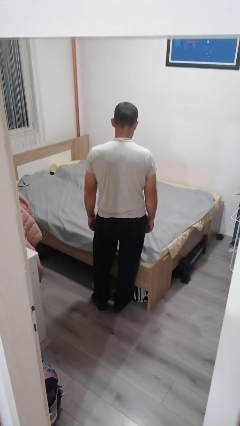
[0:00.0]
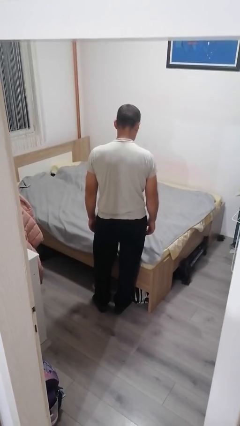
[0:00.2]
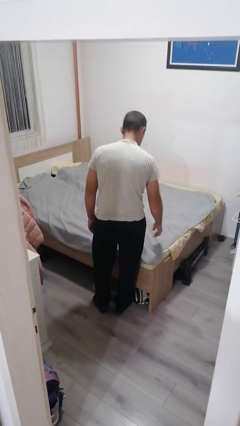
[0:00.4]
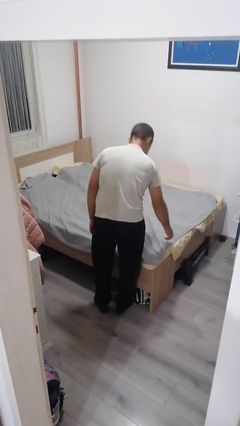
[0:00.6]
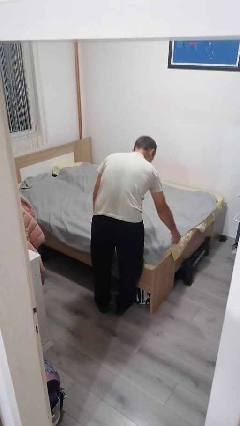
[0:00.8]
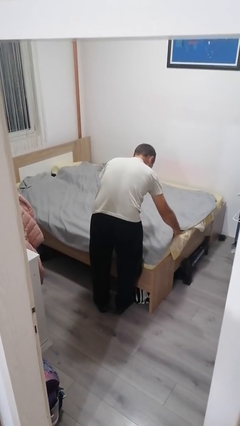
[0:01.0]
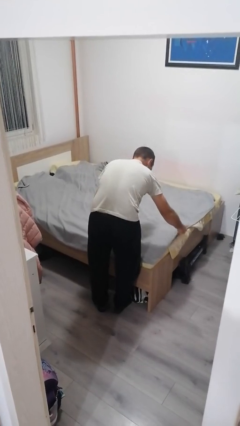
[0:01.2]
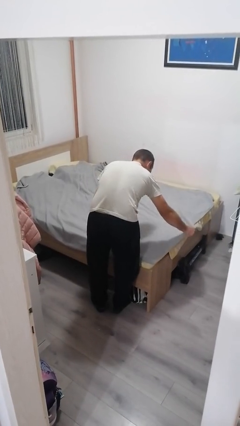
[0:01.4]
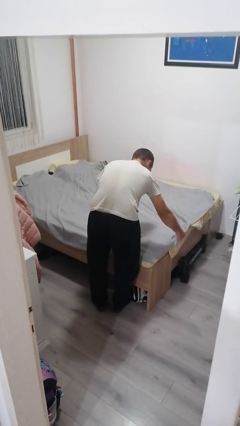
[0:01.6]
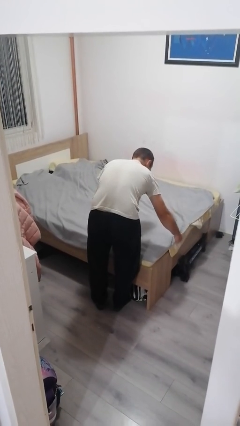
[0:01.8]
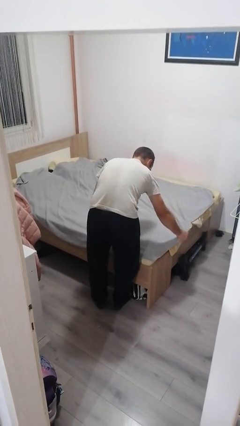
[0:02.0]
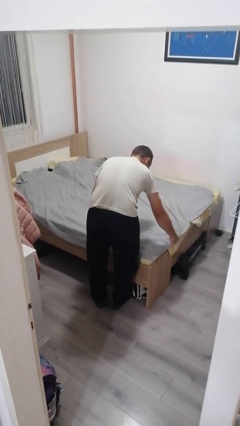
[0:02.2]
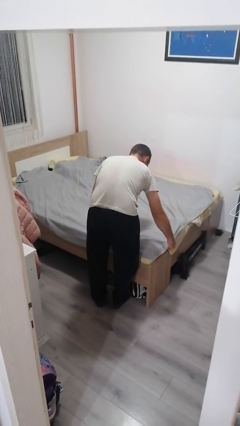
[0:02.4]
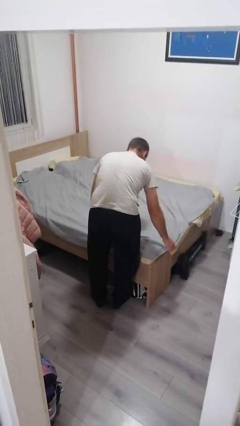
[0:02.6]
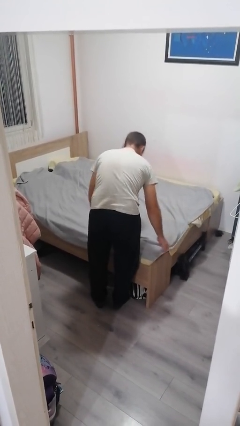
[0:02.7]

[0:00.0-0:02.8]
person makes bed

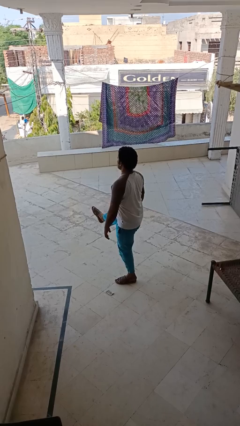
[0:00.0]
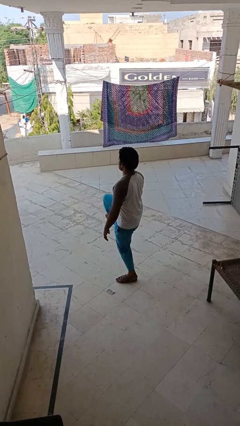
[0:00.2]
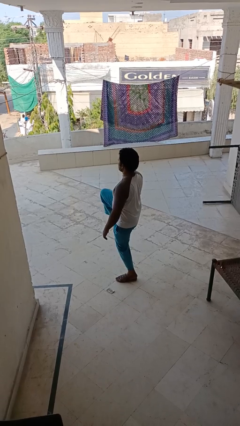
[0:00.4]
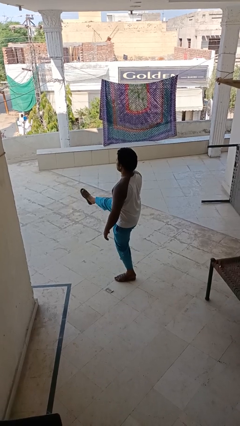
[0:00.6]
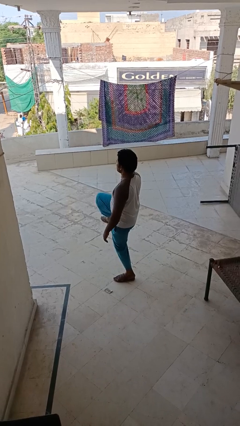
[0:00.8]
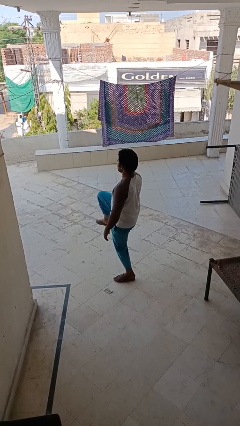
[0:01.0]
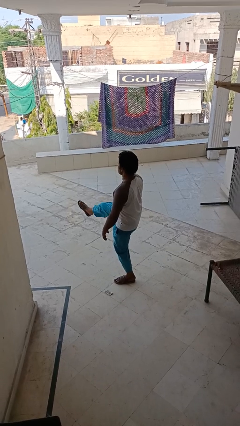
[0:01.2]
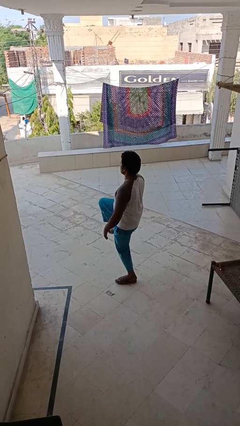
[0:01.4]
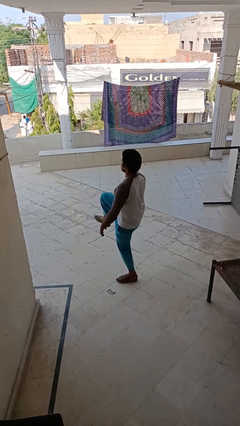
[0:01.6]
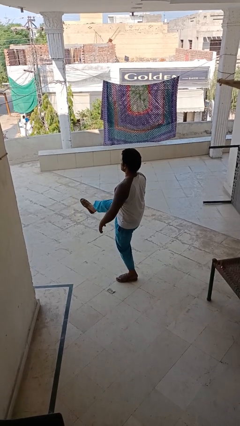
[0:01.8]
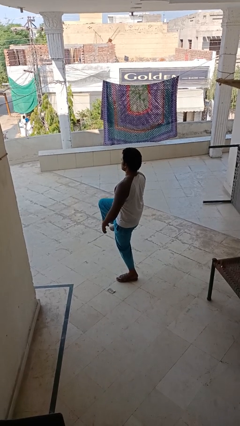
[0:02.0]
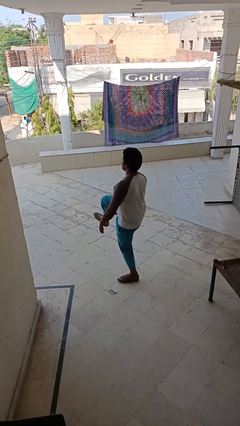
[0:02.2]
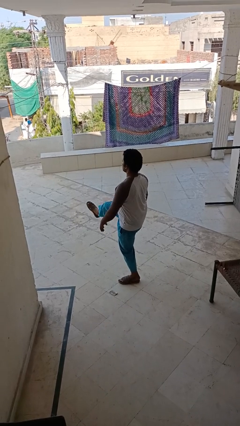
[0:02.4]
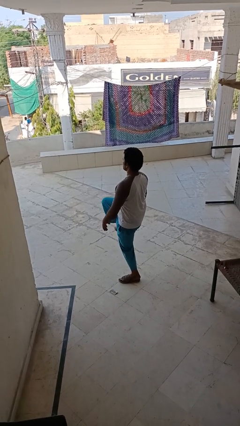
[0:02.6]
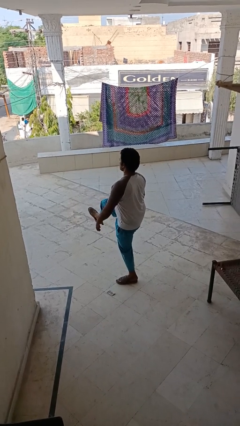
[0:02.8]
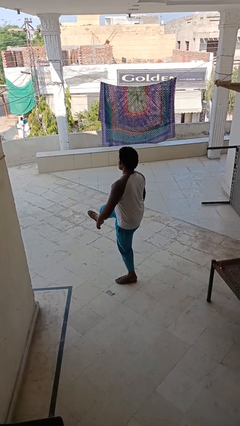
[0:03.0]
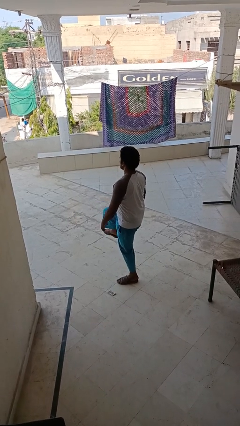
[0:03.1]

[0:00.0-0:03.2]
person karate kicks

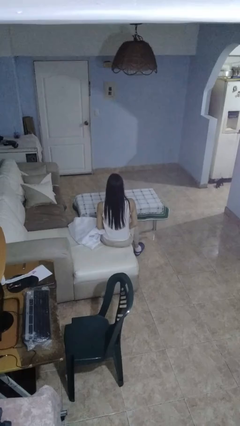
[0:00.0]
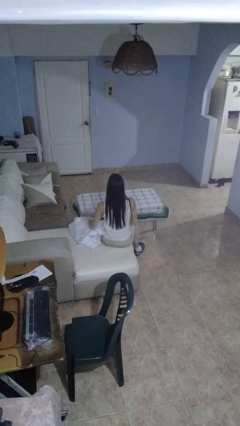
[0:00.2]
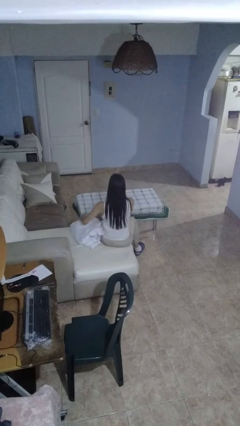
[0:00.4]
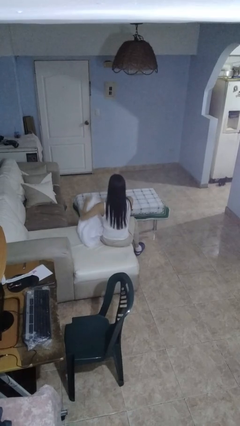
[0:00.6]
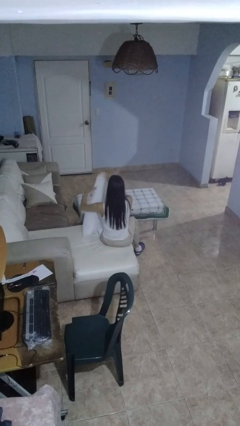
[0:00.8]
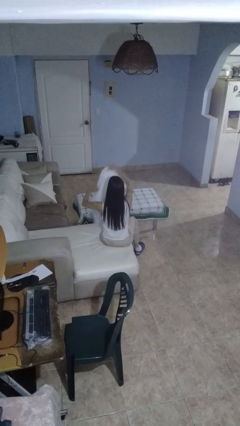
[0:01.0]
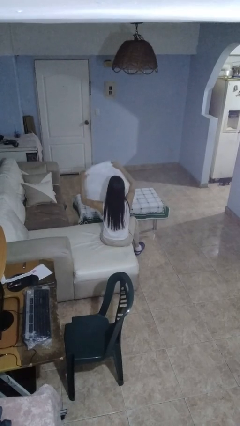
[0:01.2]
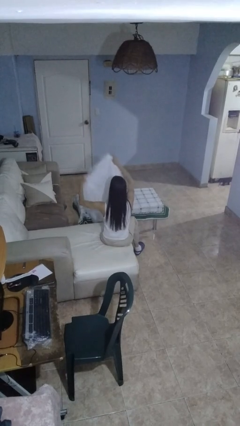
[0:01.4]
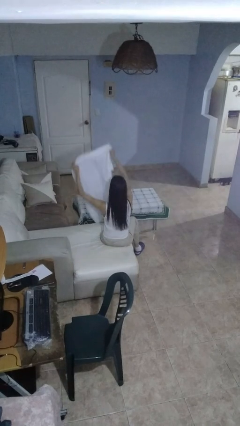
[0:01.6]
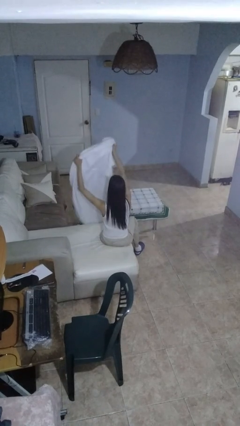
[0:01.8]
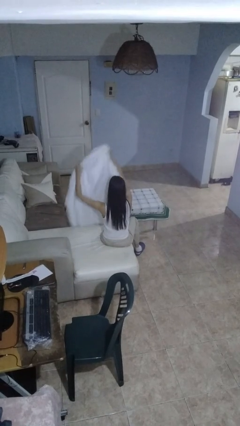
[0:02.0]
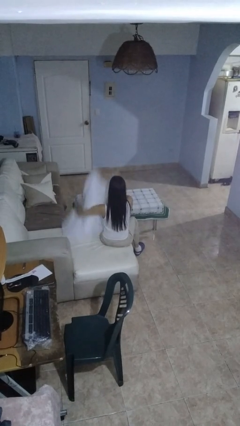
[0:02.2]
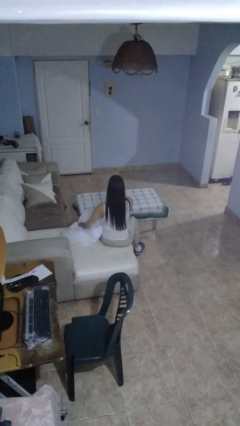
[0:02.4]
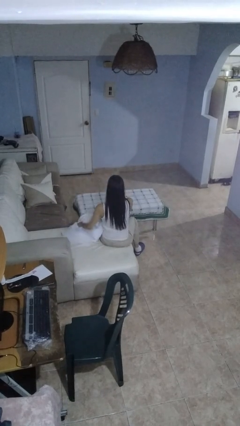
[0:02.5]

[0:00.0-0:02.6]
person unfolds blanket

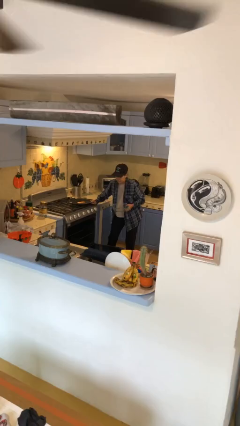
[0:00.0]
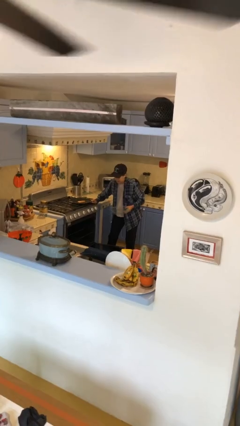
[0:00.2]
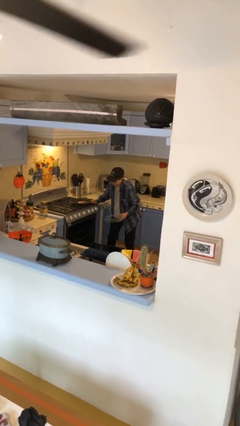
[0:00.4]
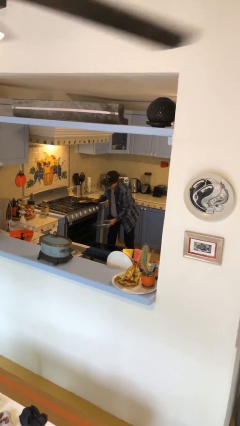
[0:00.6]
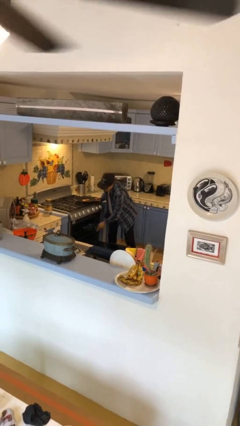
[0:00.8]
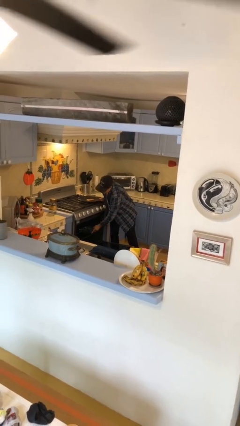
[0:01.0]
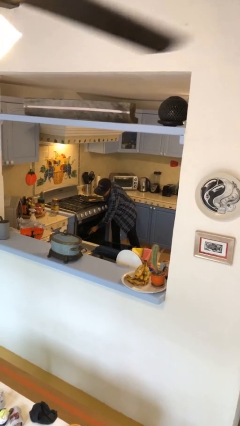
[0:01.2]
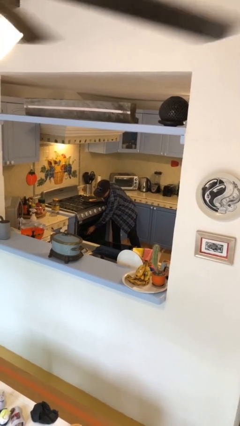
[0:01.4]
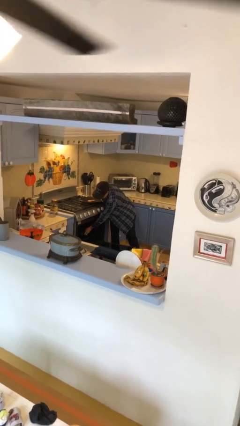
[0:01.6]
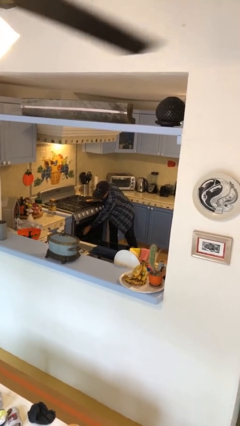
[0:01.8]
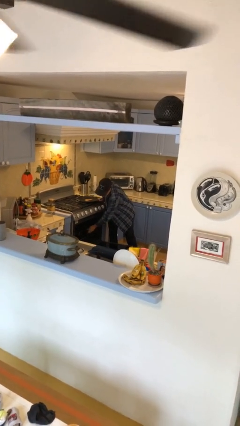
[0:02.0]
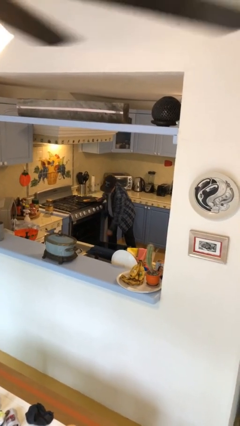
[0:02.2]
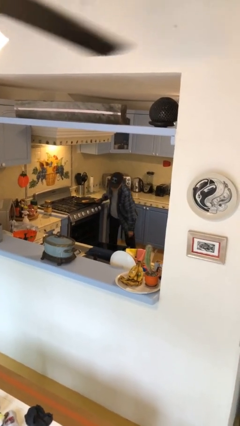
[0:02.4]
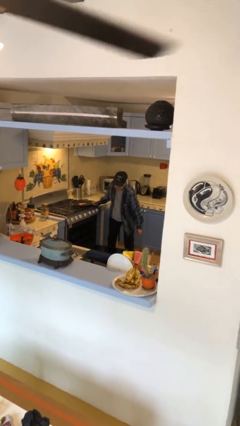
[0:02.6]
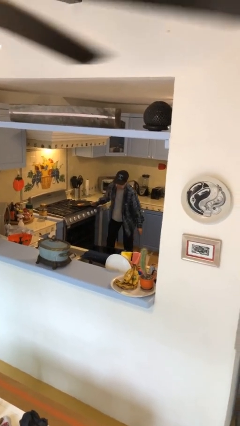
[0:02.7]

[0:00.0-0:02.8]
person puts object into oven

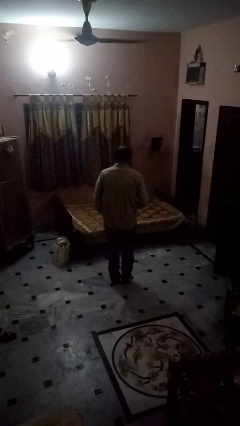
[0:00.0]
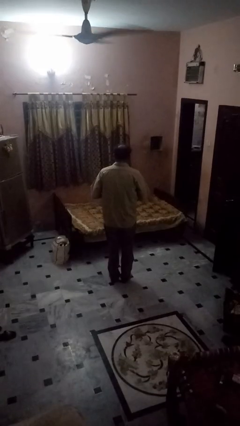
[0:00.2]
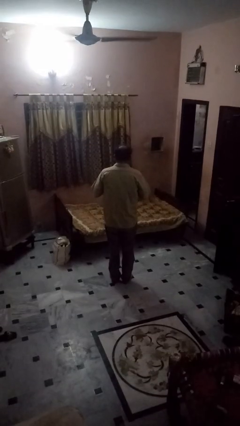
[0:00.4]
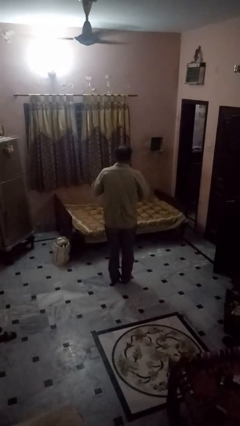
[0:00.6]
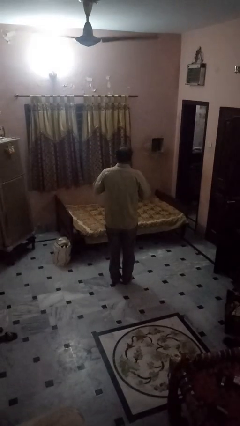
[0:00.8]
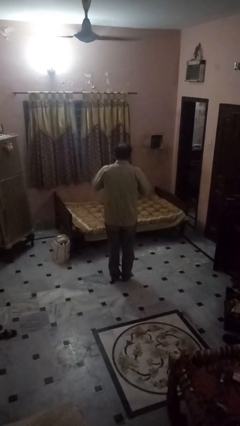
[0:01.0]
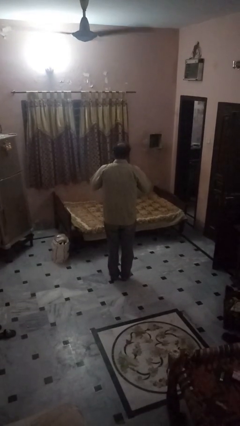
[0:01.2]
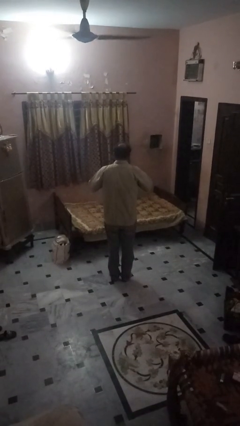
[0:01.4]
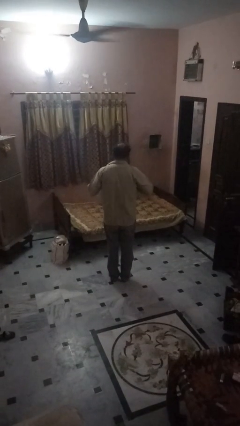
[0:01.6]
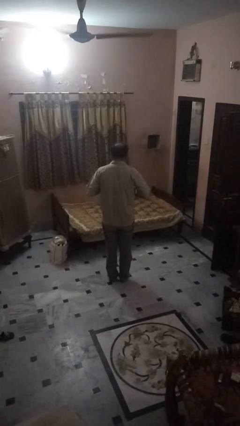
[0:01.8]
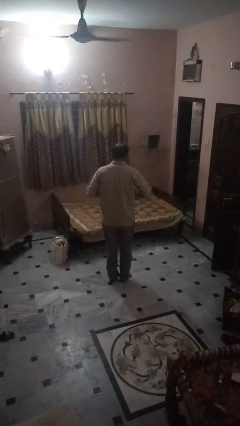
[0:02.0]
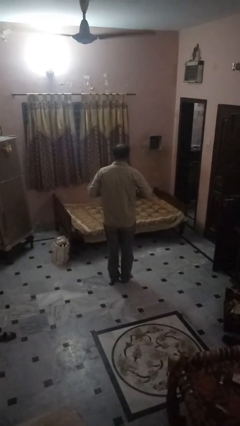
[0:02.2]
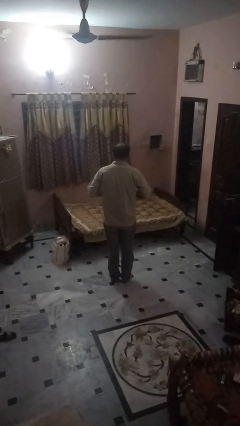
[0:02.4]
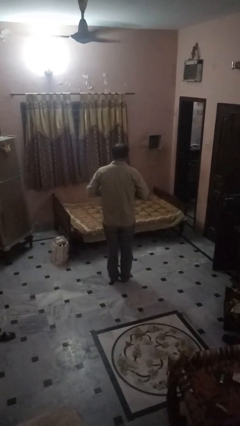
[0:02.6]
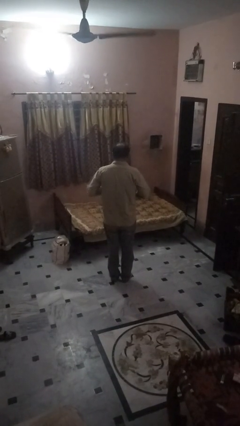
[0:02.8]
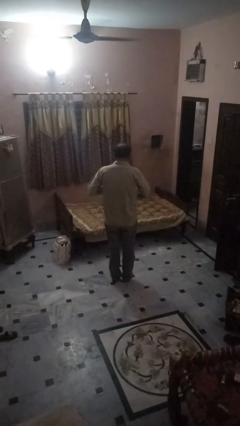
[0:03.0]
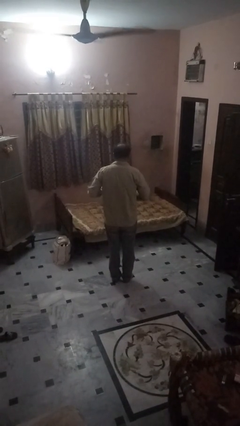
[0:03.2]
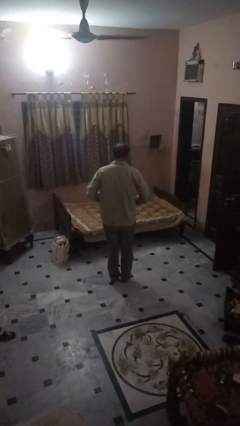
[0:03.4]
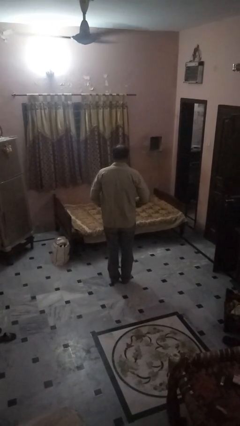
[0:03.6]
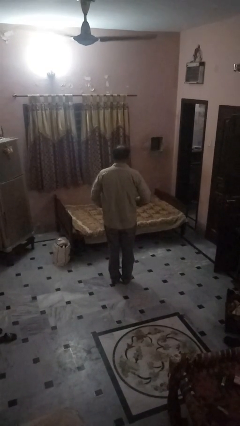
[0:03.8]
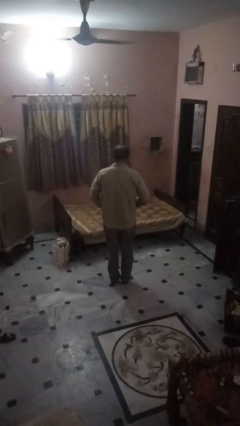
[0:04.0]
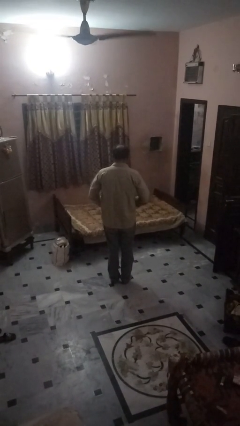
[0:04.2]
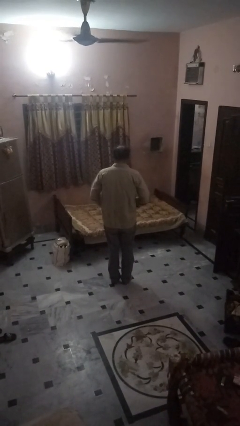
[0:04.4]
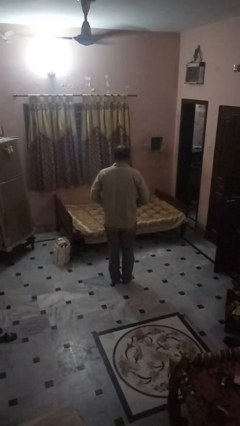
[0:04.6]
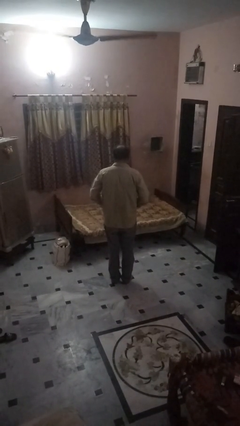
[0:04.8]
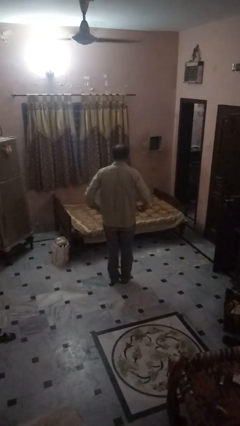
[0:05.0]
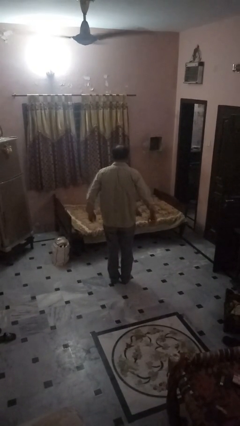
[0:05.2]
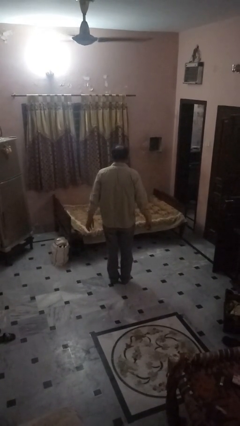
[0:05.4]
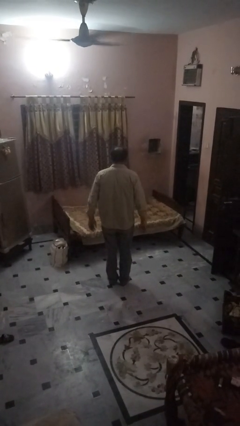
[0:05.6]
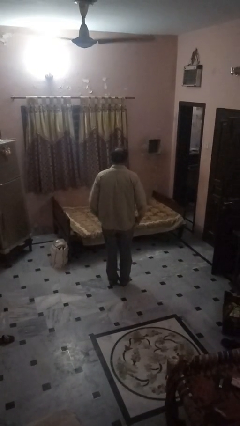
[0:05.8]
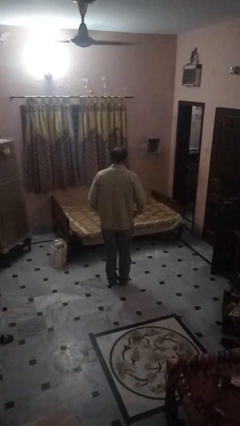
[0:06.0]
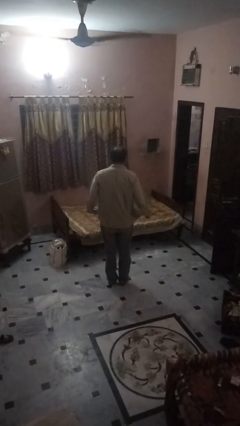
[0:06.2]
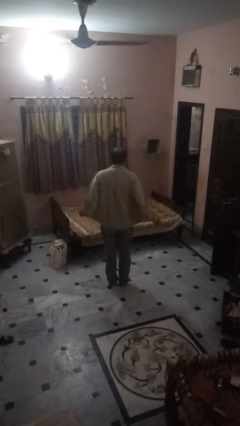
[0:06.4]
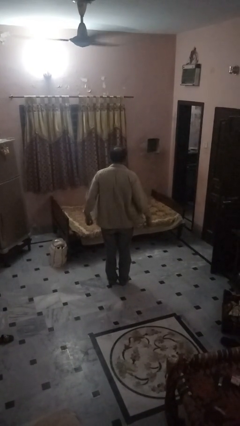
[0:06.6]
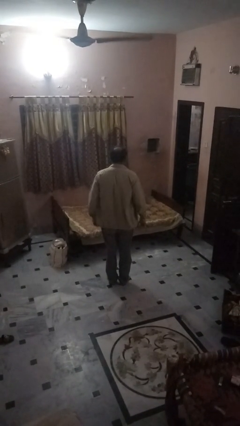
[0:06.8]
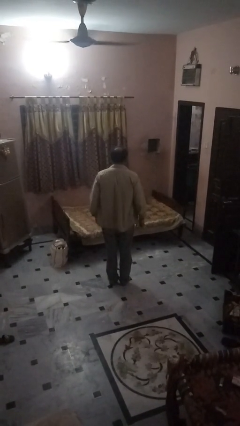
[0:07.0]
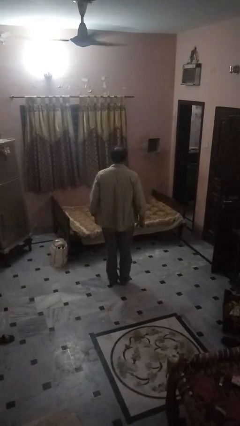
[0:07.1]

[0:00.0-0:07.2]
person unbuttons shirt
